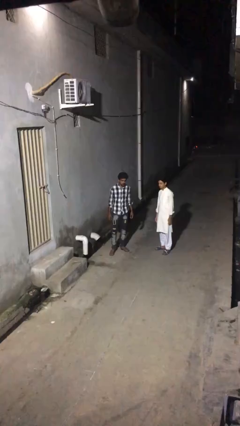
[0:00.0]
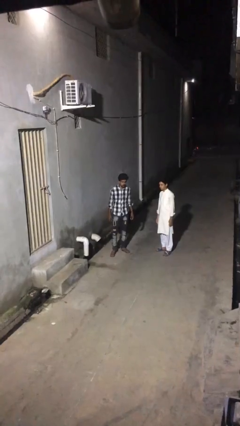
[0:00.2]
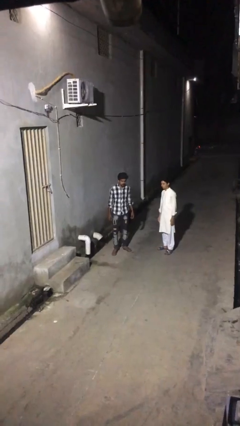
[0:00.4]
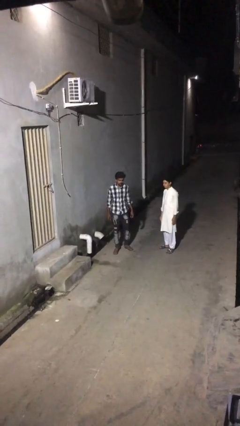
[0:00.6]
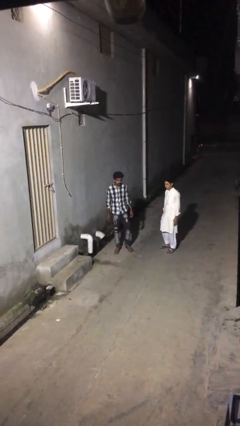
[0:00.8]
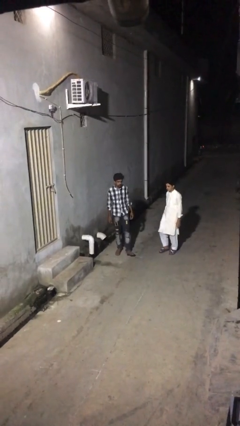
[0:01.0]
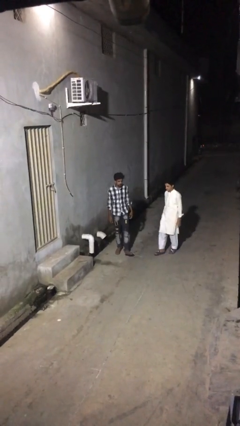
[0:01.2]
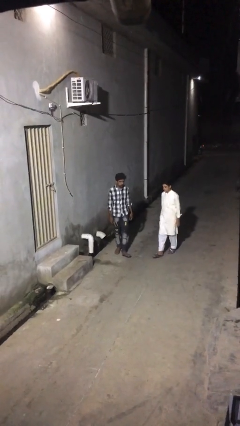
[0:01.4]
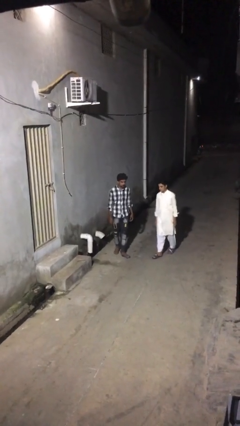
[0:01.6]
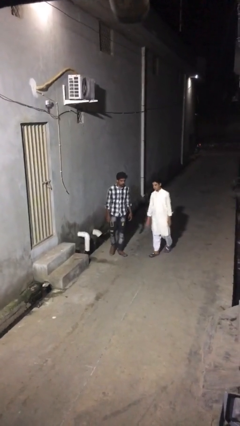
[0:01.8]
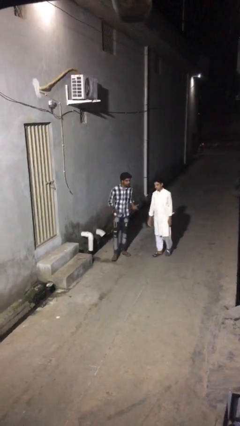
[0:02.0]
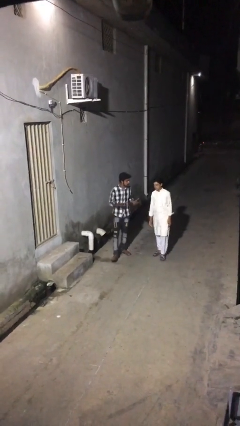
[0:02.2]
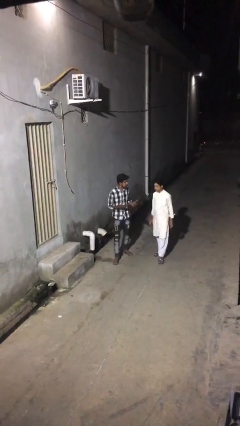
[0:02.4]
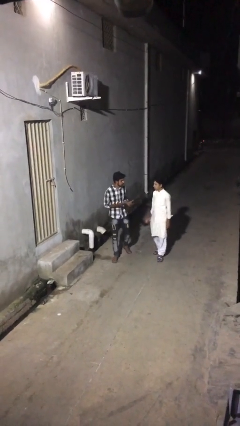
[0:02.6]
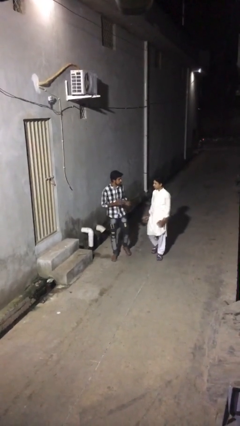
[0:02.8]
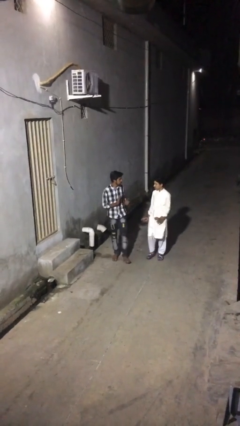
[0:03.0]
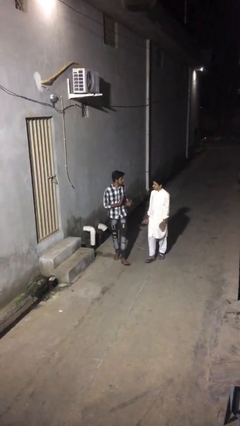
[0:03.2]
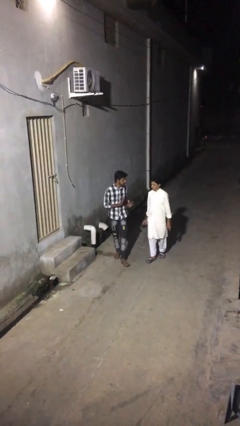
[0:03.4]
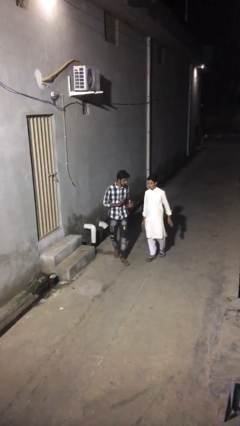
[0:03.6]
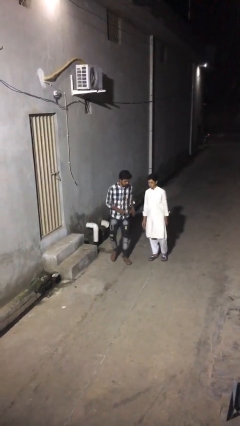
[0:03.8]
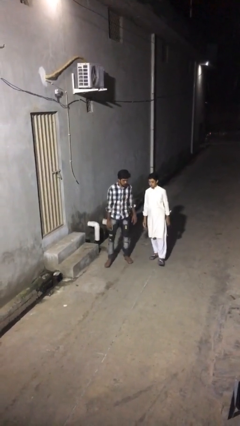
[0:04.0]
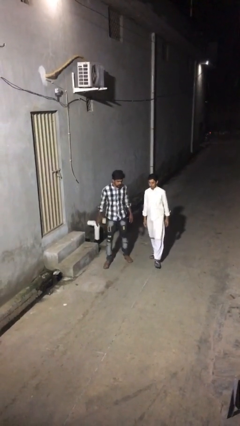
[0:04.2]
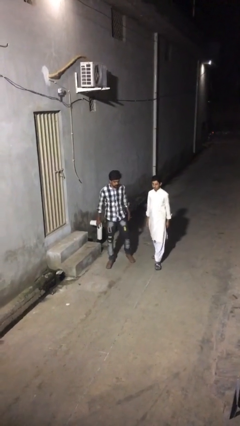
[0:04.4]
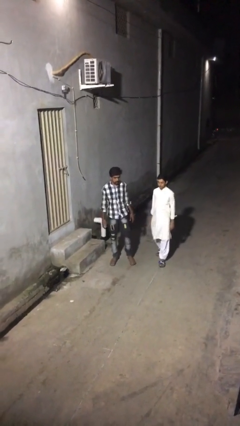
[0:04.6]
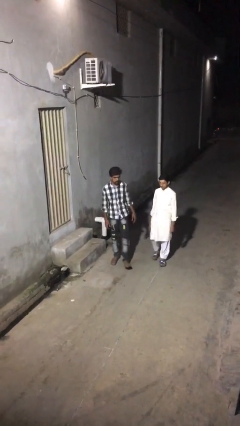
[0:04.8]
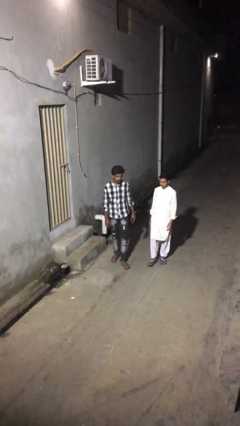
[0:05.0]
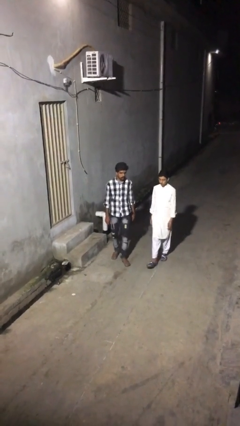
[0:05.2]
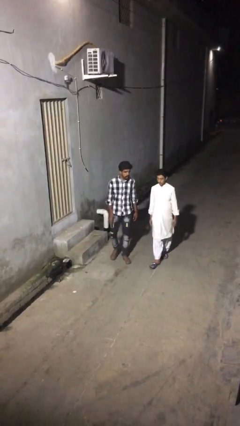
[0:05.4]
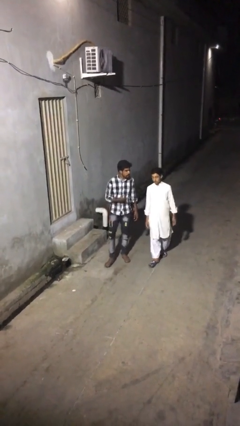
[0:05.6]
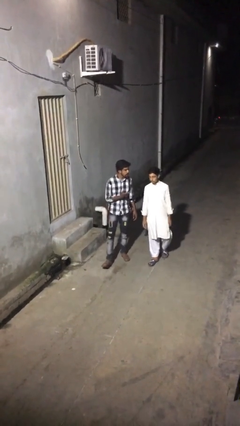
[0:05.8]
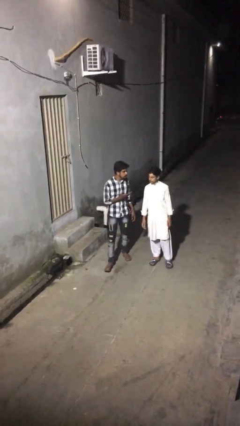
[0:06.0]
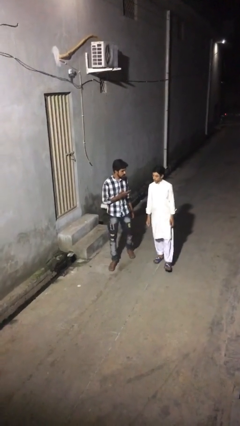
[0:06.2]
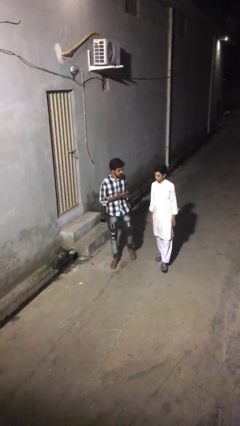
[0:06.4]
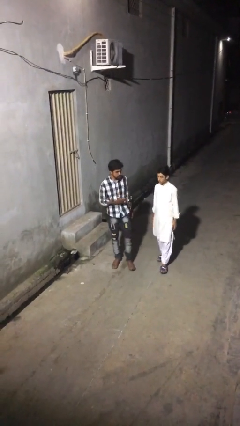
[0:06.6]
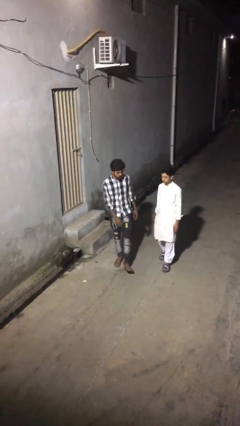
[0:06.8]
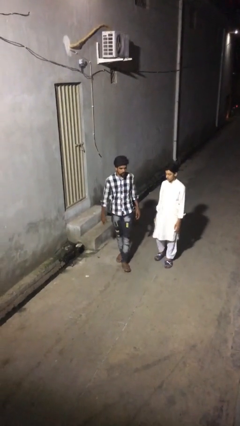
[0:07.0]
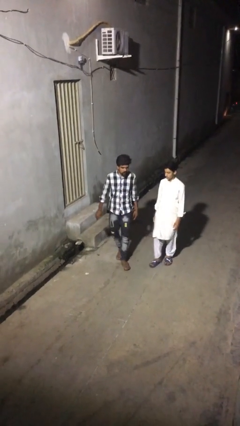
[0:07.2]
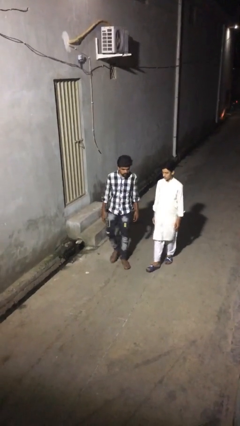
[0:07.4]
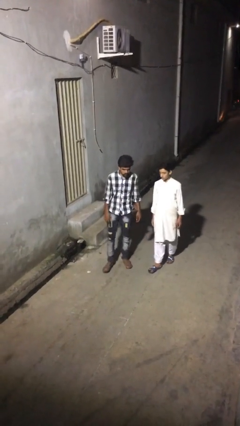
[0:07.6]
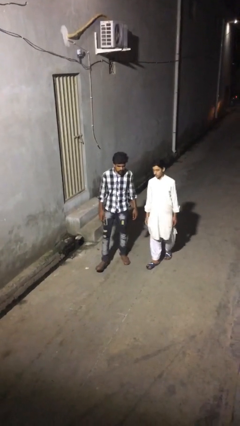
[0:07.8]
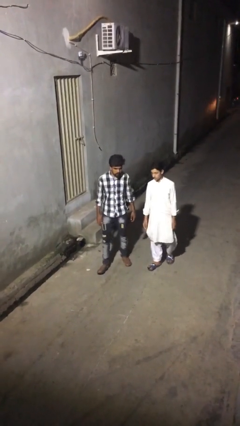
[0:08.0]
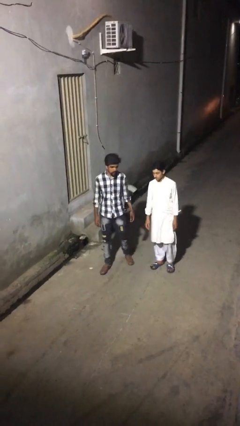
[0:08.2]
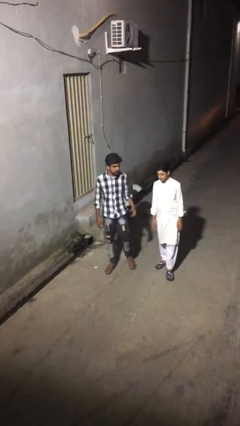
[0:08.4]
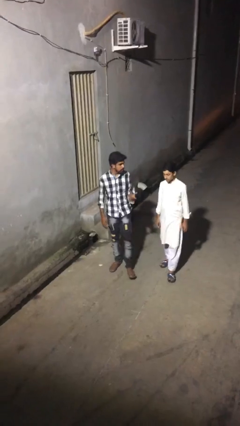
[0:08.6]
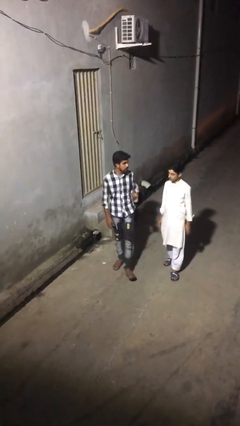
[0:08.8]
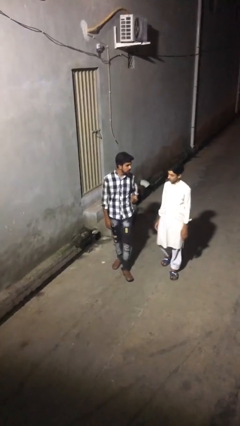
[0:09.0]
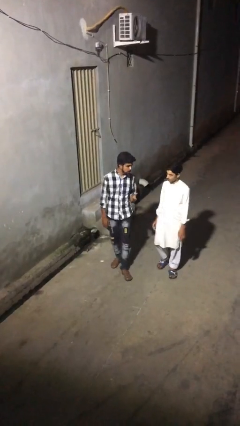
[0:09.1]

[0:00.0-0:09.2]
person talks to person

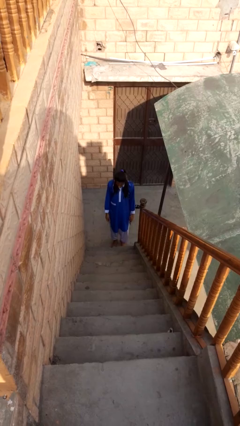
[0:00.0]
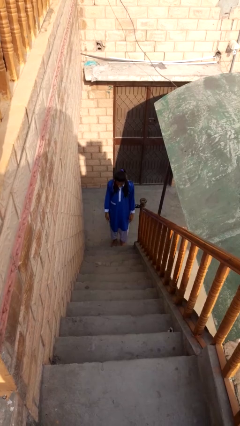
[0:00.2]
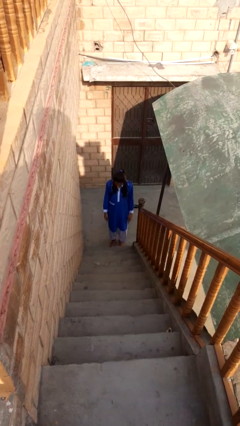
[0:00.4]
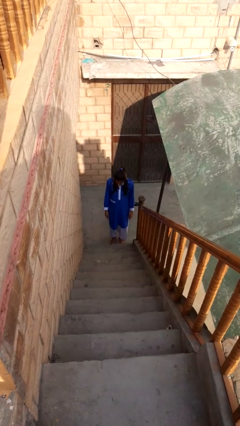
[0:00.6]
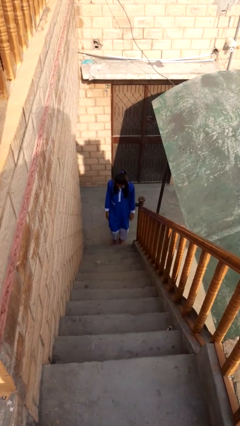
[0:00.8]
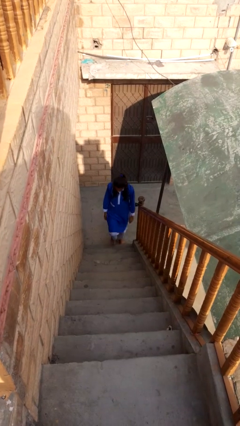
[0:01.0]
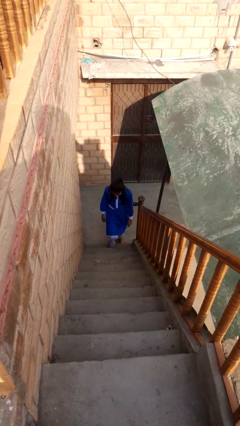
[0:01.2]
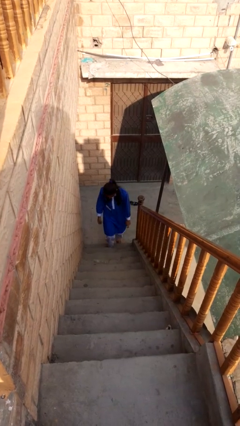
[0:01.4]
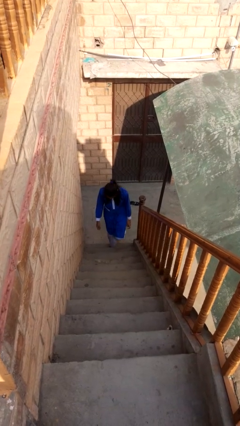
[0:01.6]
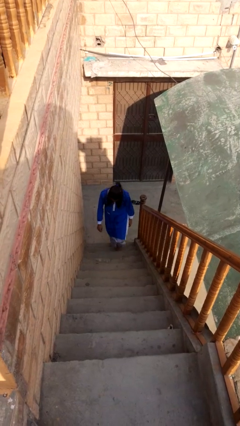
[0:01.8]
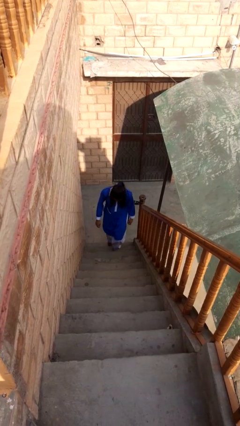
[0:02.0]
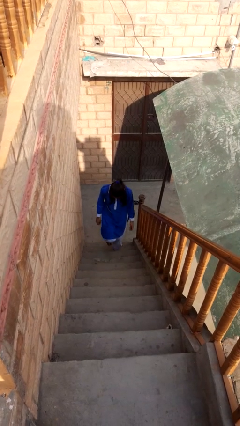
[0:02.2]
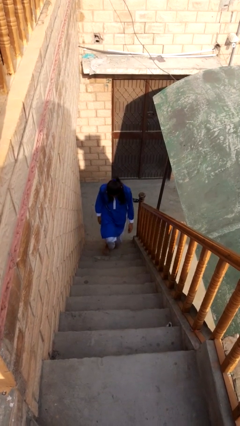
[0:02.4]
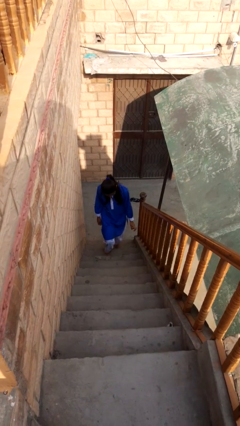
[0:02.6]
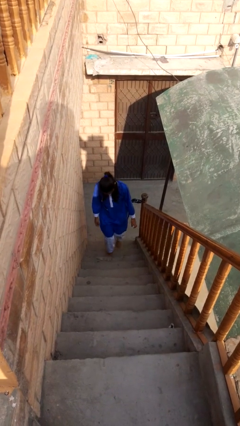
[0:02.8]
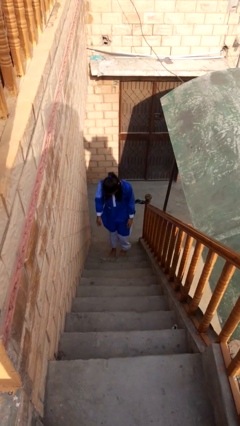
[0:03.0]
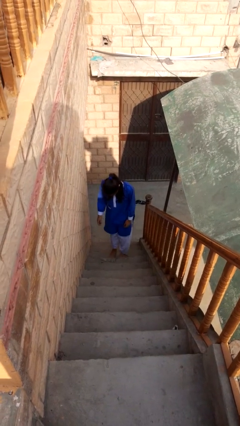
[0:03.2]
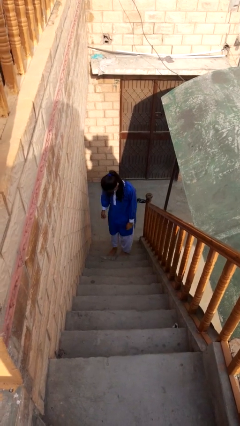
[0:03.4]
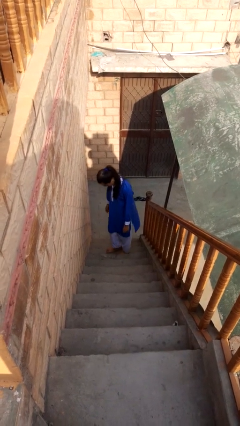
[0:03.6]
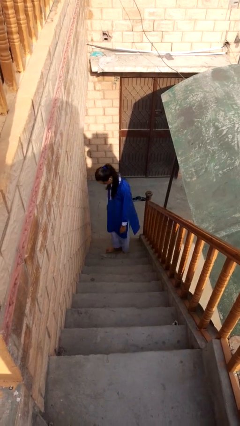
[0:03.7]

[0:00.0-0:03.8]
person climbs up stairs

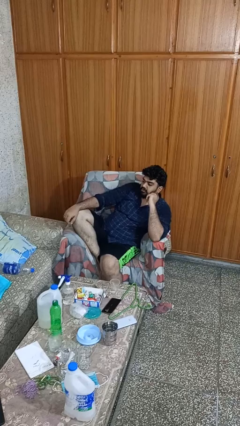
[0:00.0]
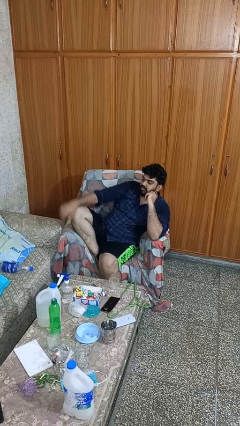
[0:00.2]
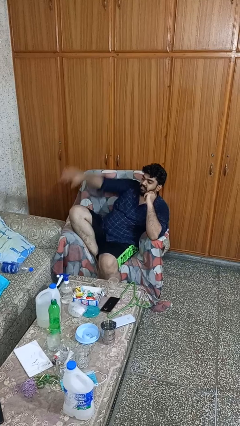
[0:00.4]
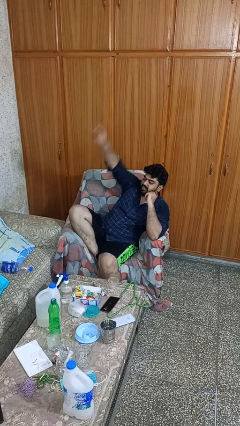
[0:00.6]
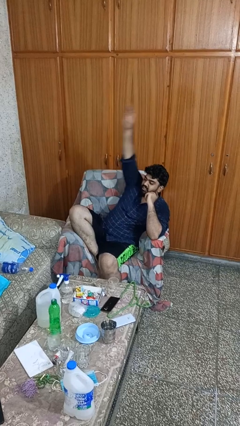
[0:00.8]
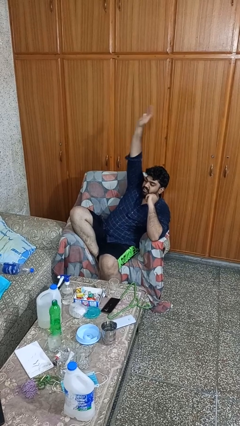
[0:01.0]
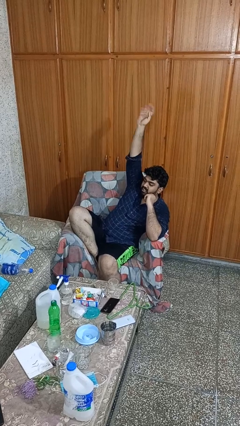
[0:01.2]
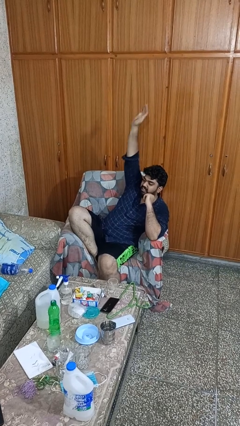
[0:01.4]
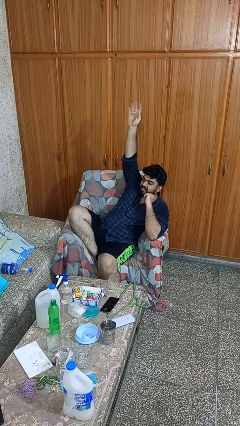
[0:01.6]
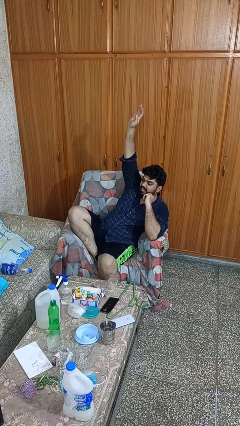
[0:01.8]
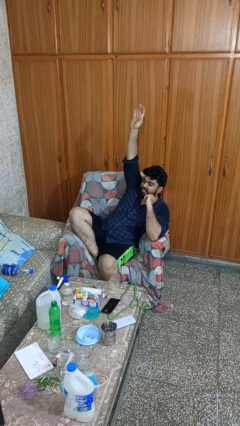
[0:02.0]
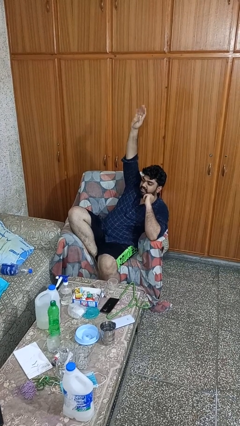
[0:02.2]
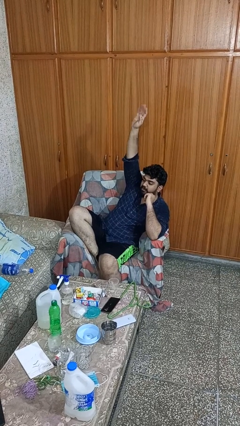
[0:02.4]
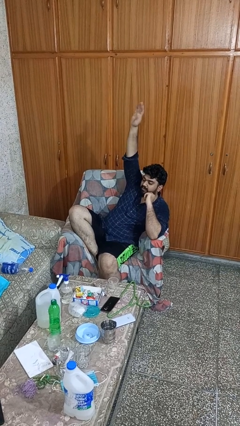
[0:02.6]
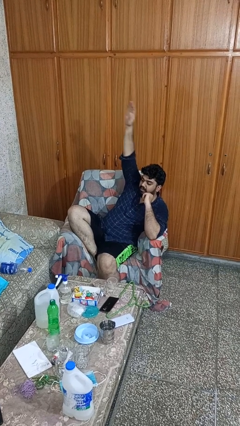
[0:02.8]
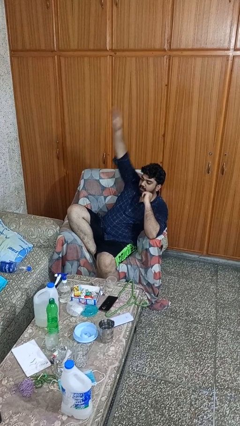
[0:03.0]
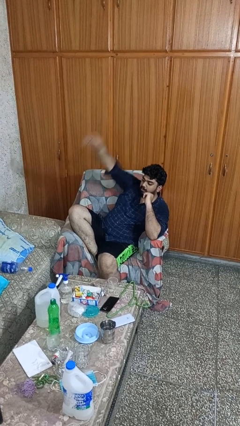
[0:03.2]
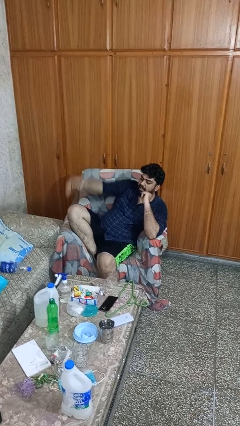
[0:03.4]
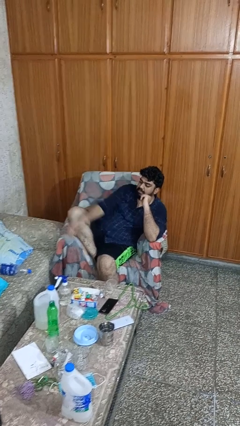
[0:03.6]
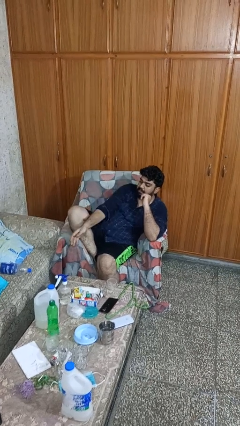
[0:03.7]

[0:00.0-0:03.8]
person waves at person

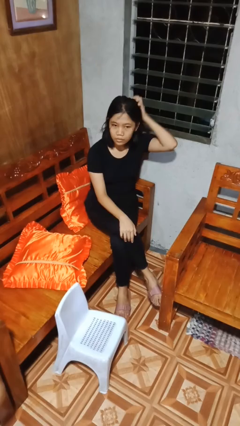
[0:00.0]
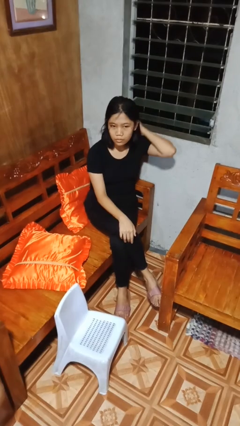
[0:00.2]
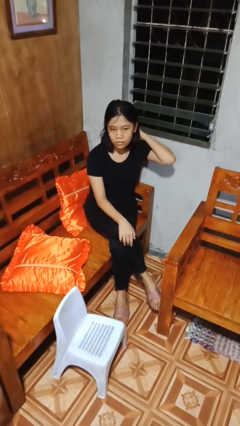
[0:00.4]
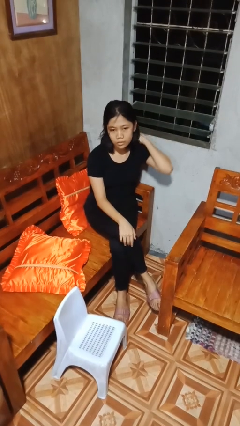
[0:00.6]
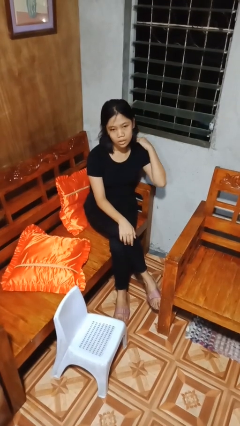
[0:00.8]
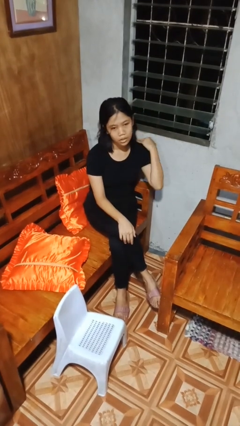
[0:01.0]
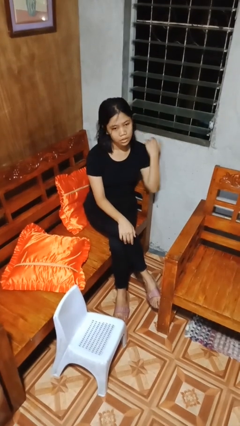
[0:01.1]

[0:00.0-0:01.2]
person strokes hair
